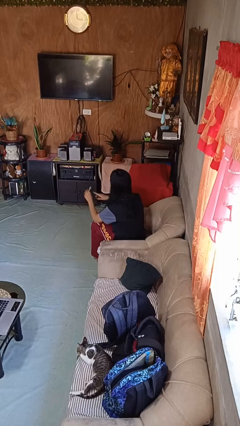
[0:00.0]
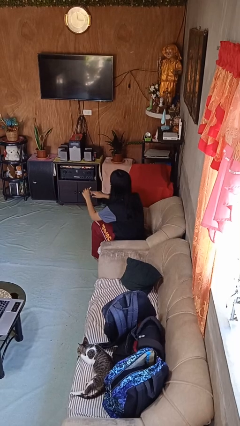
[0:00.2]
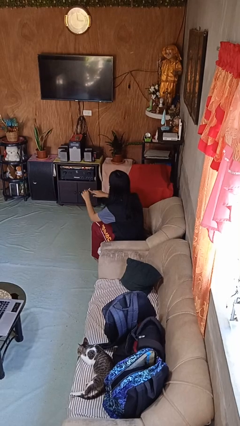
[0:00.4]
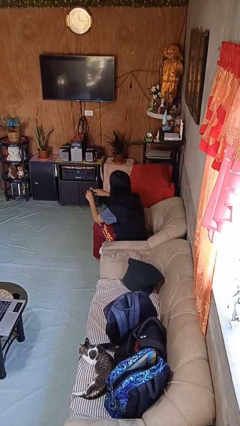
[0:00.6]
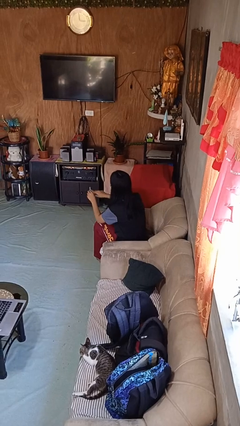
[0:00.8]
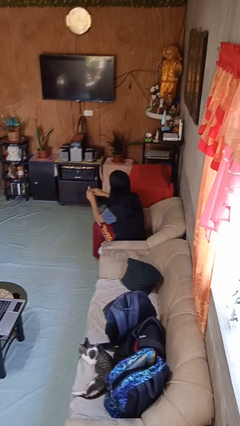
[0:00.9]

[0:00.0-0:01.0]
person files fingernails

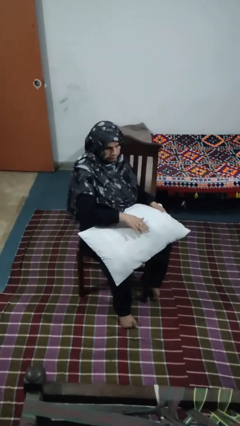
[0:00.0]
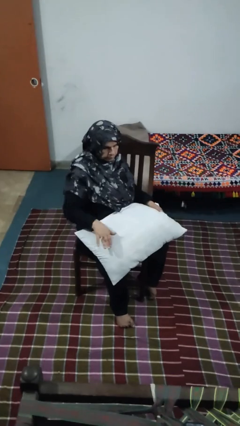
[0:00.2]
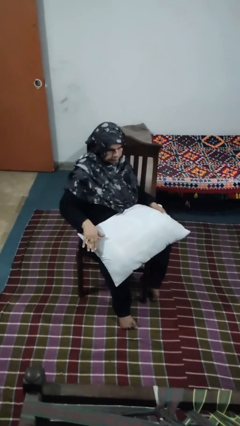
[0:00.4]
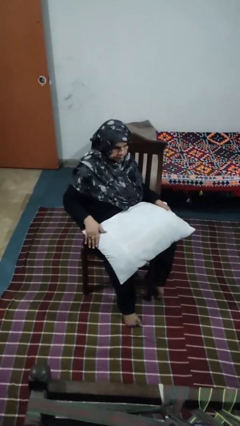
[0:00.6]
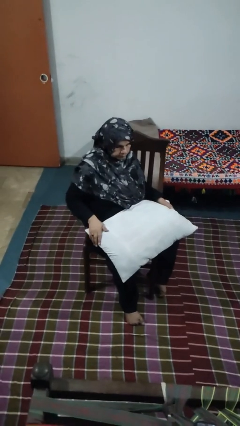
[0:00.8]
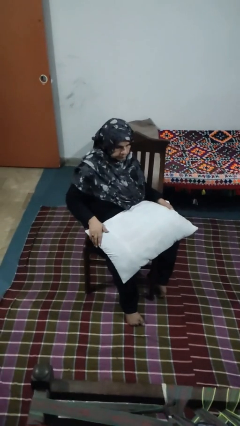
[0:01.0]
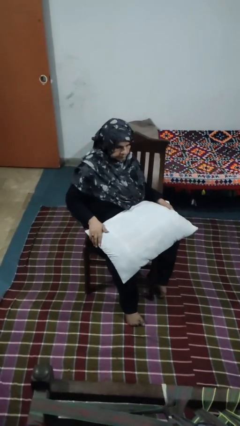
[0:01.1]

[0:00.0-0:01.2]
person waves hand over object

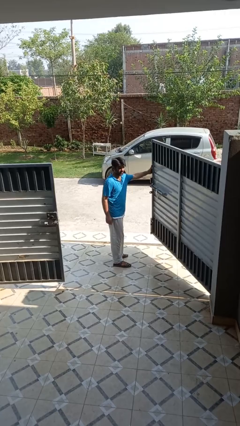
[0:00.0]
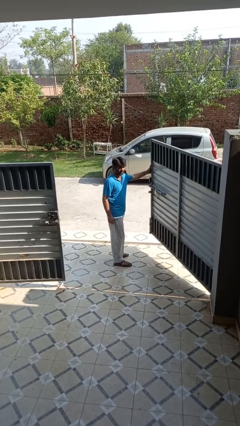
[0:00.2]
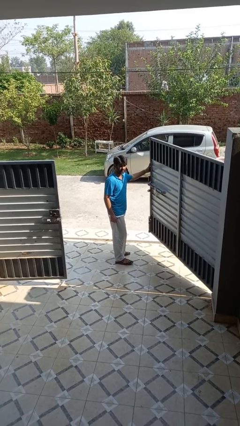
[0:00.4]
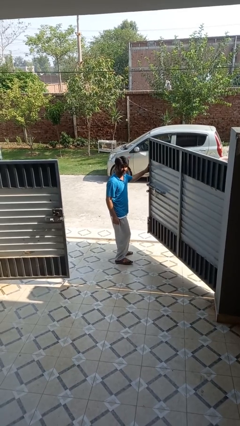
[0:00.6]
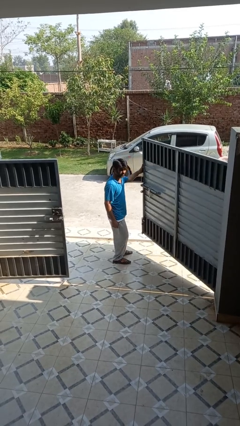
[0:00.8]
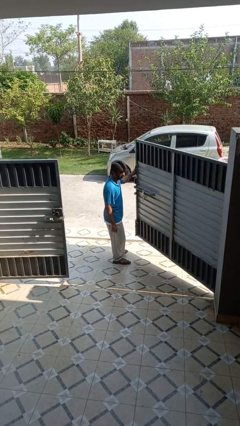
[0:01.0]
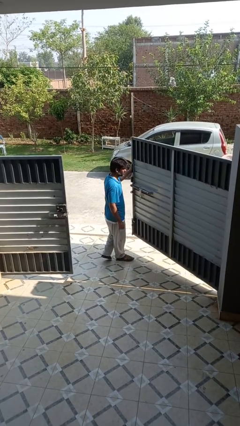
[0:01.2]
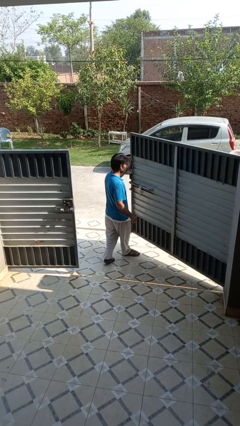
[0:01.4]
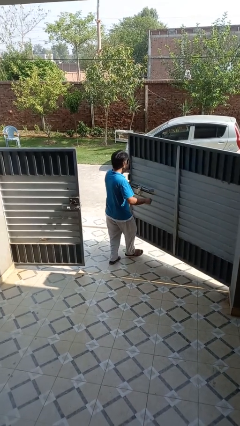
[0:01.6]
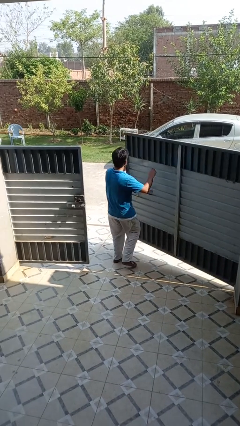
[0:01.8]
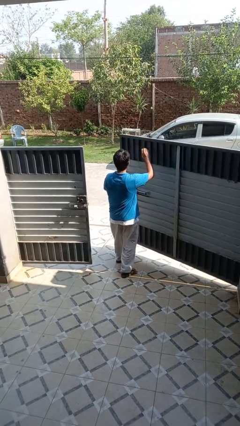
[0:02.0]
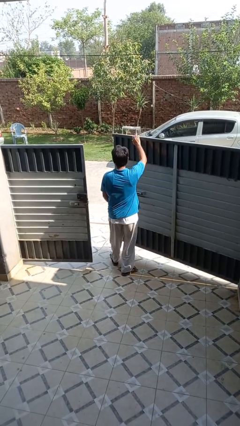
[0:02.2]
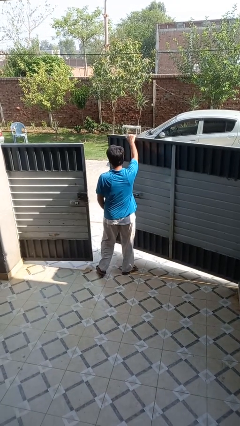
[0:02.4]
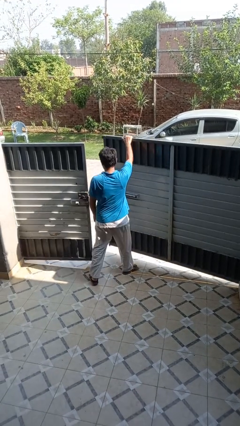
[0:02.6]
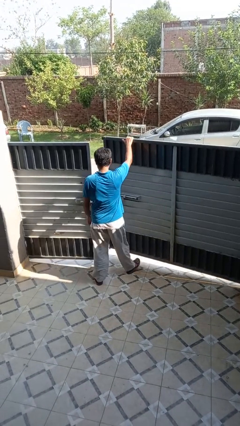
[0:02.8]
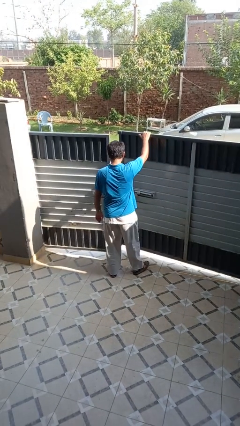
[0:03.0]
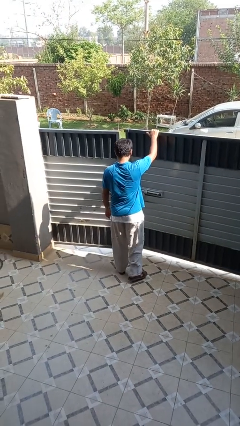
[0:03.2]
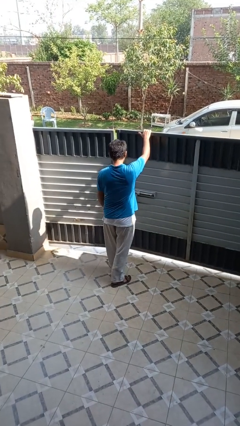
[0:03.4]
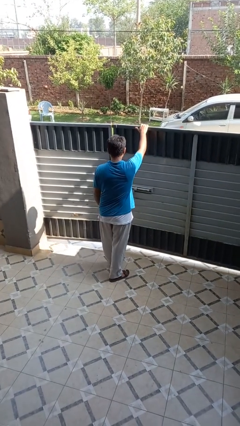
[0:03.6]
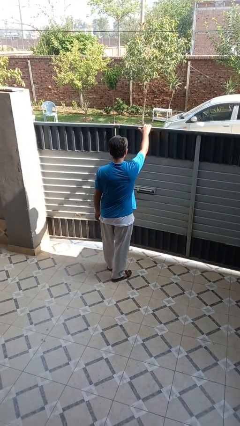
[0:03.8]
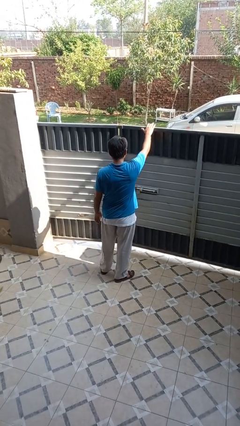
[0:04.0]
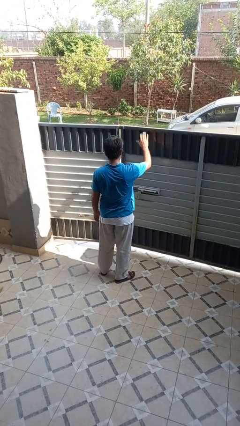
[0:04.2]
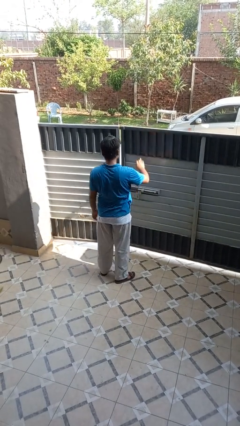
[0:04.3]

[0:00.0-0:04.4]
person closes gate

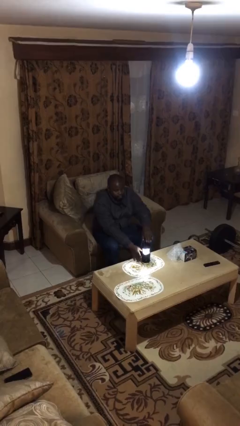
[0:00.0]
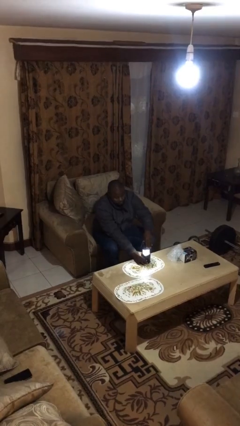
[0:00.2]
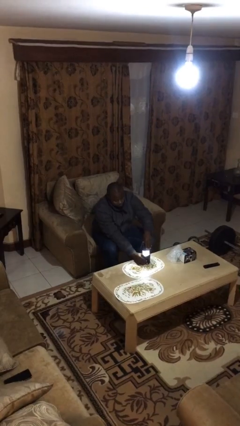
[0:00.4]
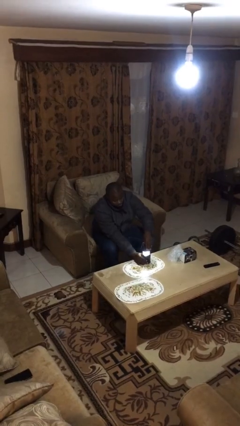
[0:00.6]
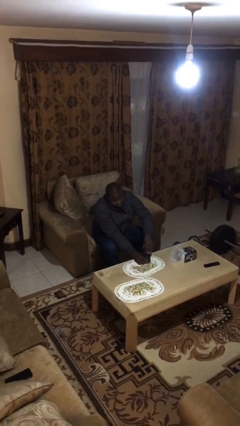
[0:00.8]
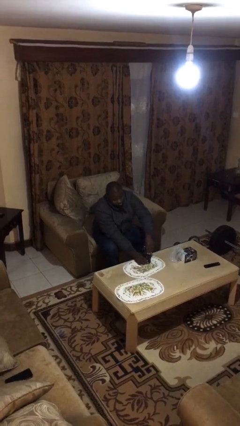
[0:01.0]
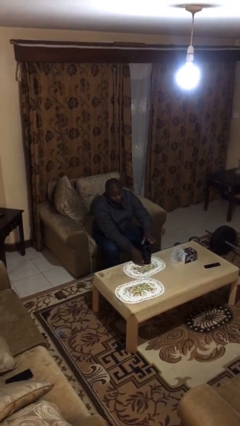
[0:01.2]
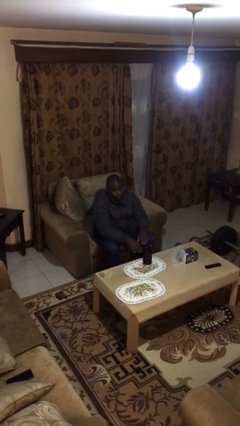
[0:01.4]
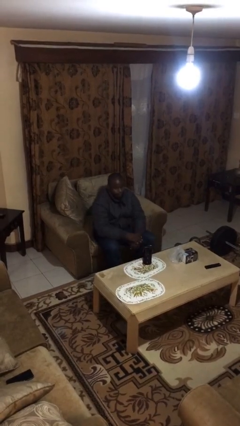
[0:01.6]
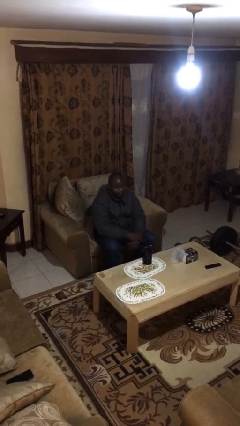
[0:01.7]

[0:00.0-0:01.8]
person turns off lamp

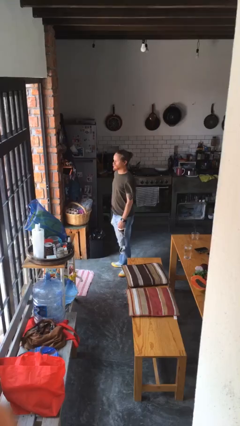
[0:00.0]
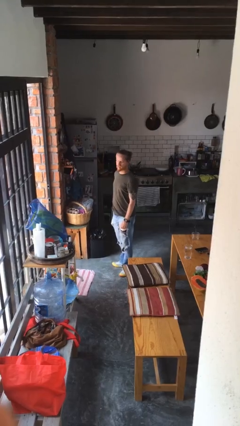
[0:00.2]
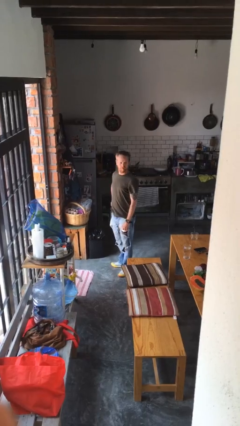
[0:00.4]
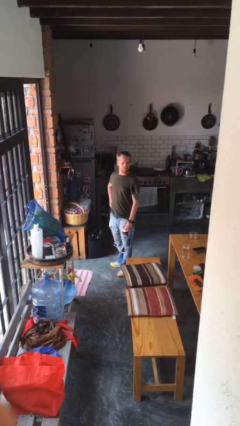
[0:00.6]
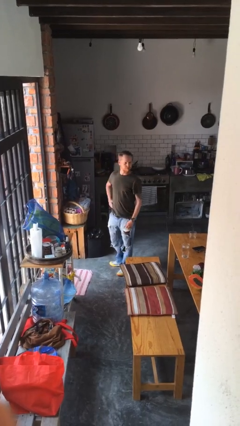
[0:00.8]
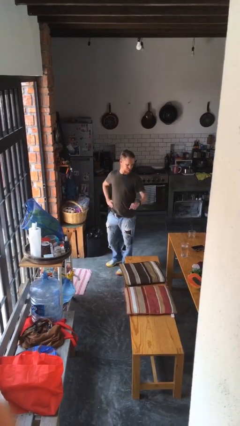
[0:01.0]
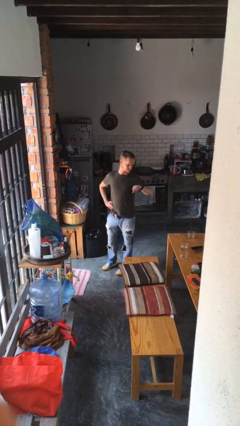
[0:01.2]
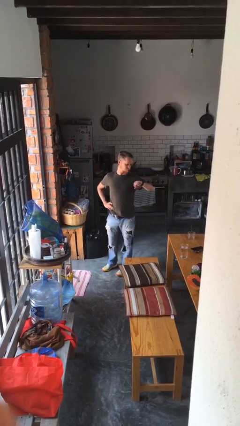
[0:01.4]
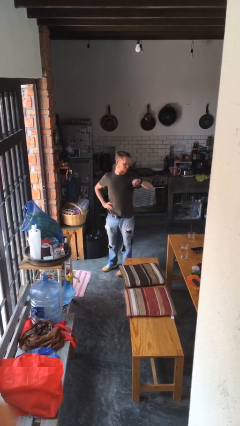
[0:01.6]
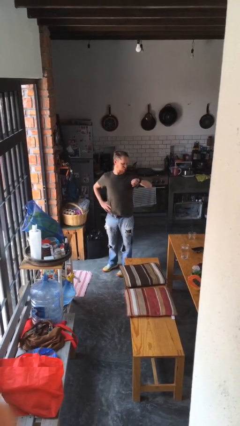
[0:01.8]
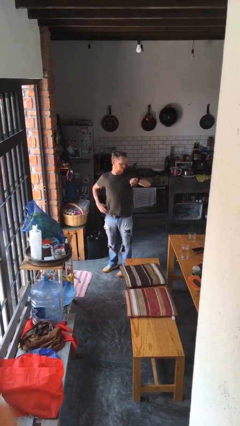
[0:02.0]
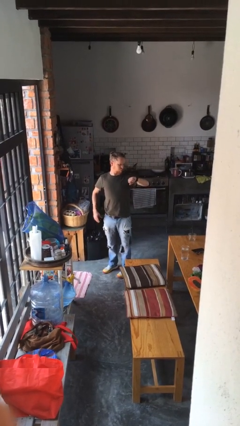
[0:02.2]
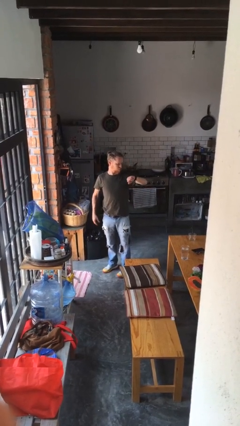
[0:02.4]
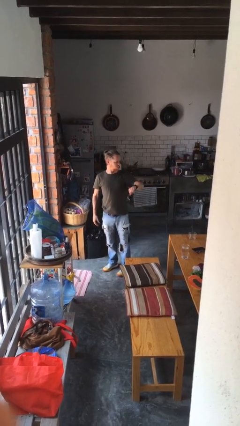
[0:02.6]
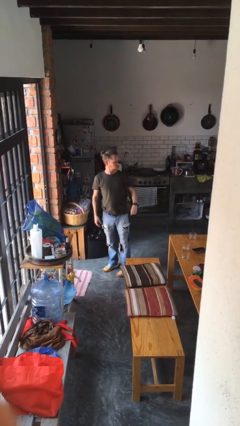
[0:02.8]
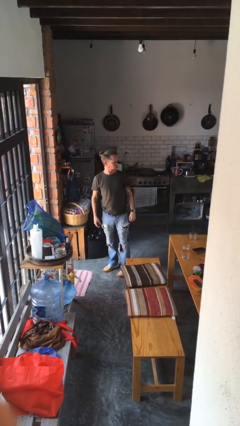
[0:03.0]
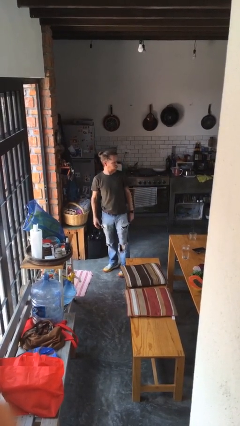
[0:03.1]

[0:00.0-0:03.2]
person looks at wristwatch

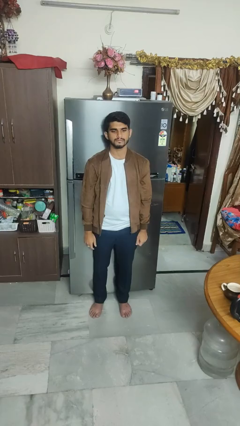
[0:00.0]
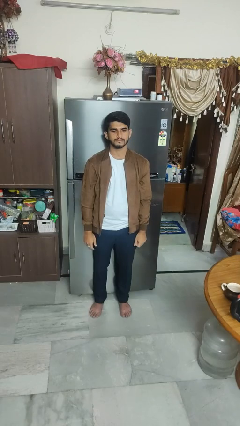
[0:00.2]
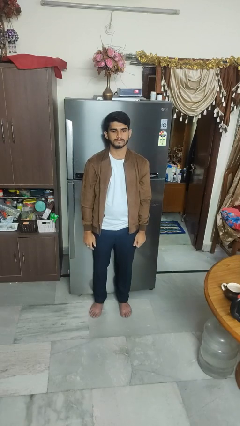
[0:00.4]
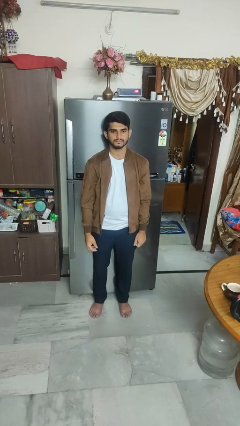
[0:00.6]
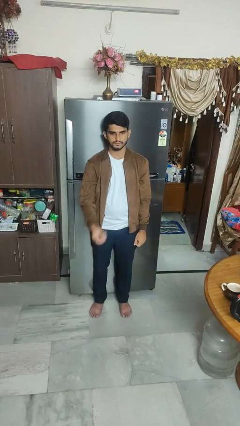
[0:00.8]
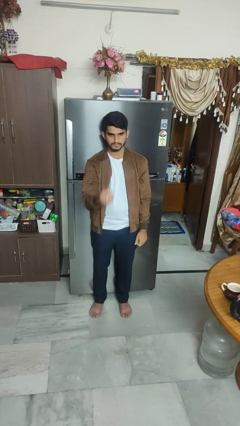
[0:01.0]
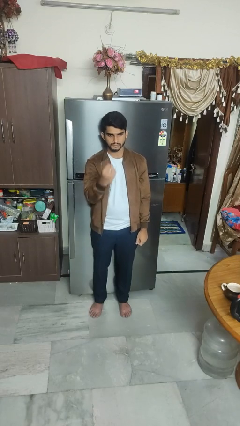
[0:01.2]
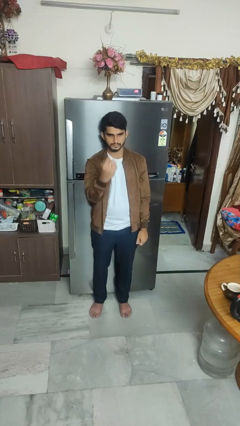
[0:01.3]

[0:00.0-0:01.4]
person gestures number five

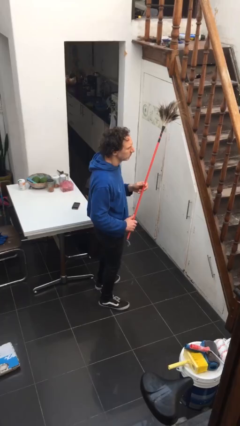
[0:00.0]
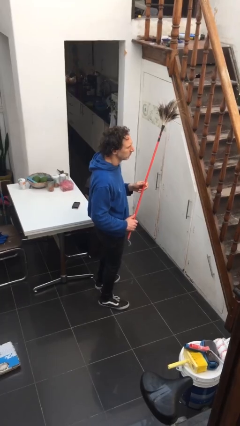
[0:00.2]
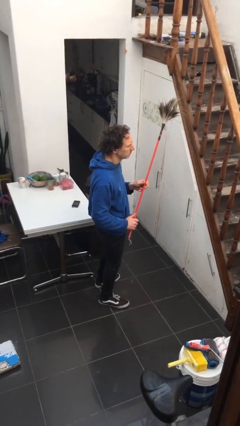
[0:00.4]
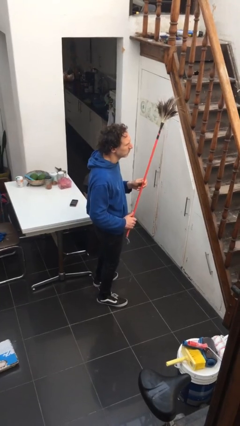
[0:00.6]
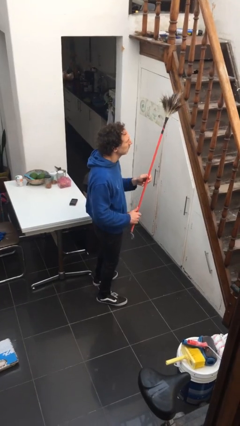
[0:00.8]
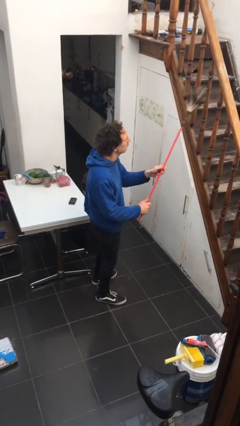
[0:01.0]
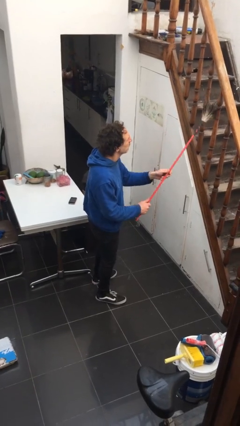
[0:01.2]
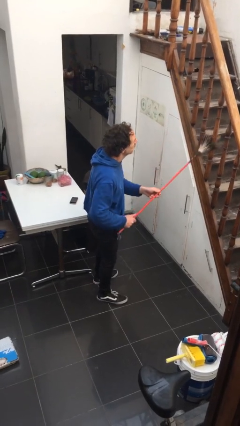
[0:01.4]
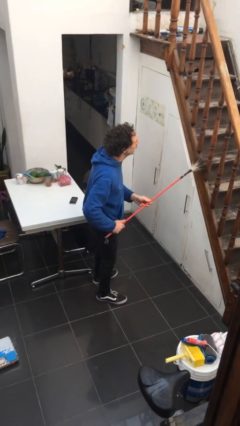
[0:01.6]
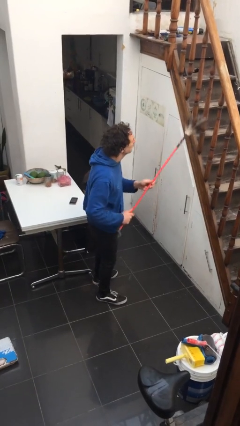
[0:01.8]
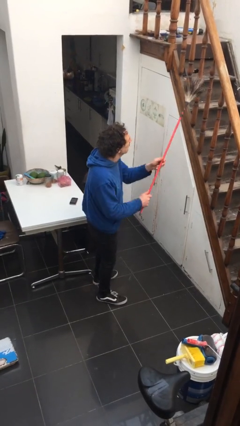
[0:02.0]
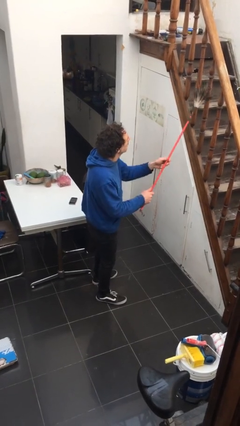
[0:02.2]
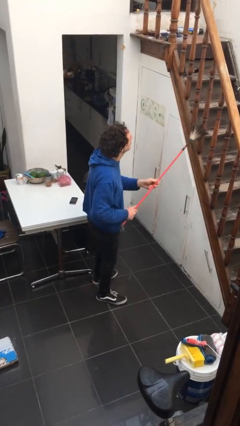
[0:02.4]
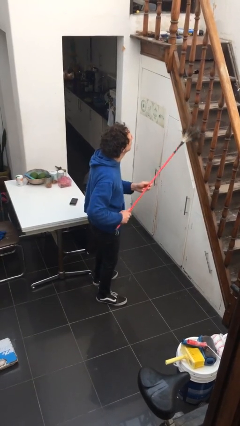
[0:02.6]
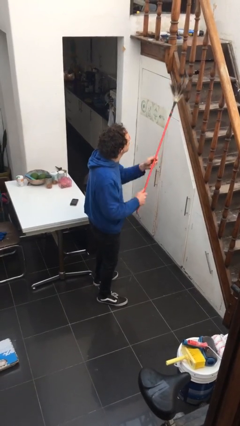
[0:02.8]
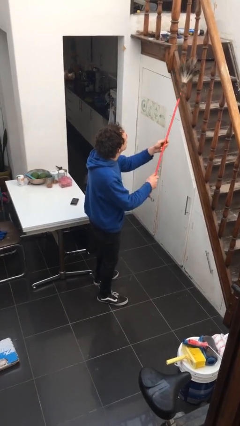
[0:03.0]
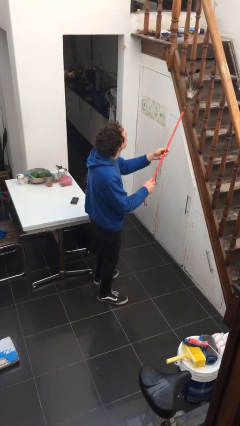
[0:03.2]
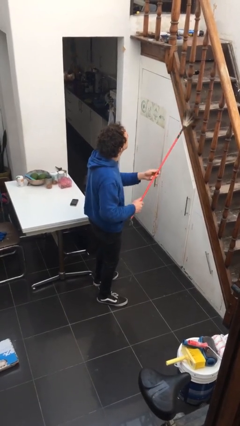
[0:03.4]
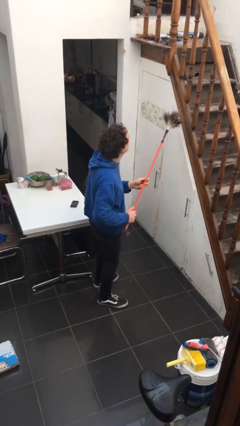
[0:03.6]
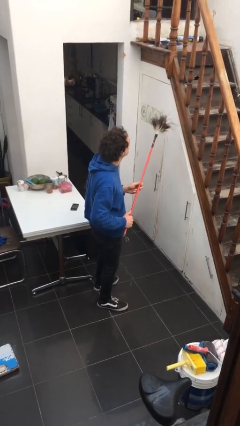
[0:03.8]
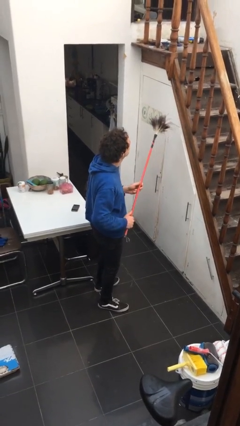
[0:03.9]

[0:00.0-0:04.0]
person dusts furniture

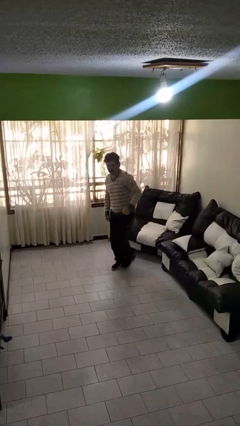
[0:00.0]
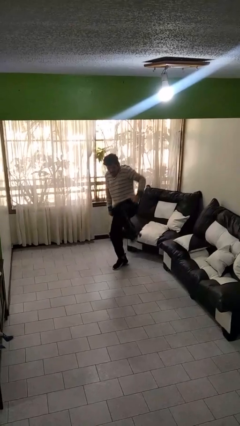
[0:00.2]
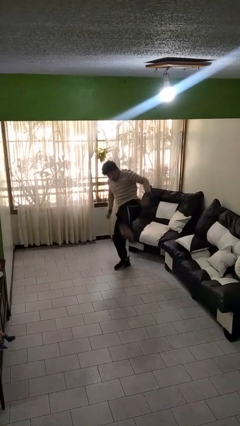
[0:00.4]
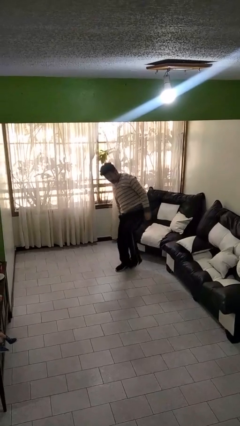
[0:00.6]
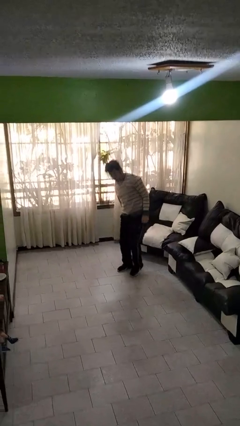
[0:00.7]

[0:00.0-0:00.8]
person karate kicks
